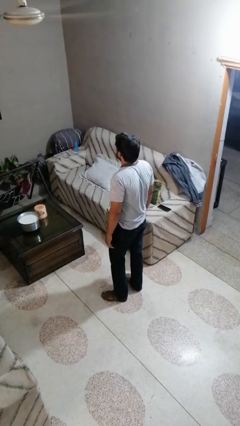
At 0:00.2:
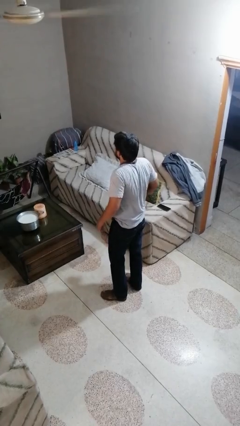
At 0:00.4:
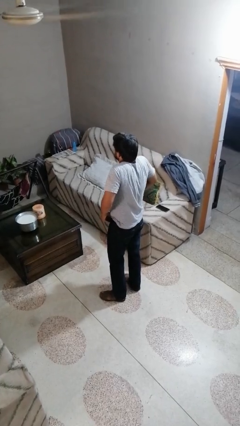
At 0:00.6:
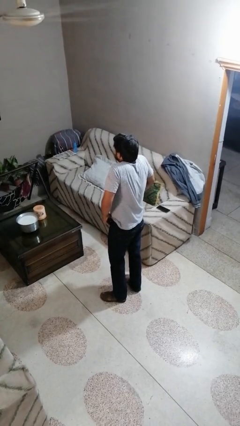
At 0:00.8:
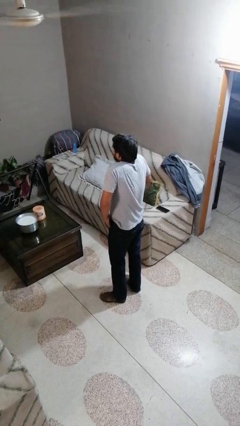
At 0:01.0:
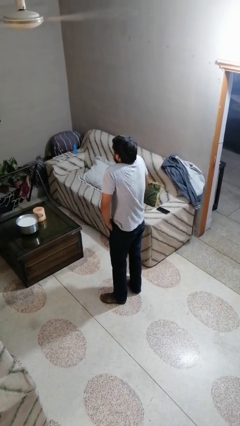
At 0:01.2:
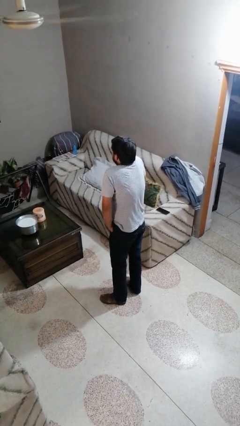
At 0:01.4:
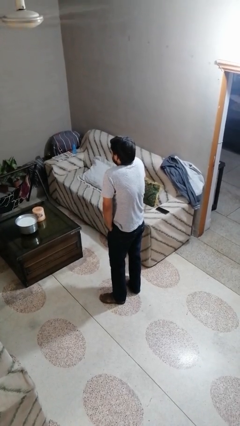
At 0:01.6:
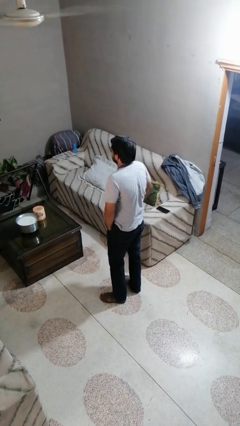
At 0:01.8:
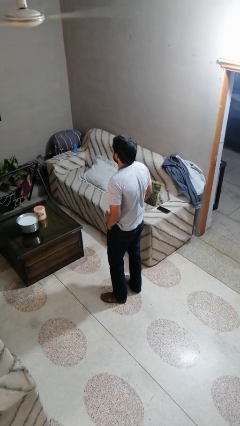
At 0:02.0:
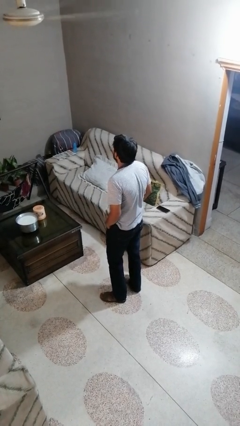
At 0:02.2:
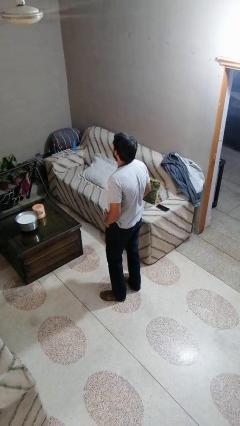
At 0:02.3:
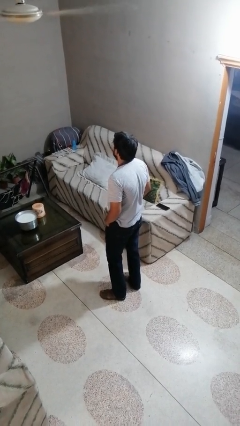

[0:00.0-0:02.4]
person puts hands in back pockets

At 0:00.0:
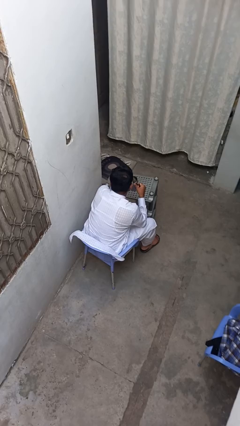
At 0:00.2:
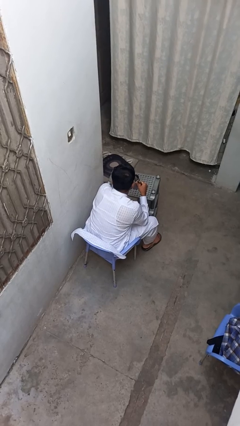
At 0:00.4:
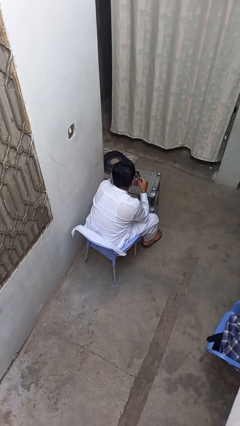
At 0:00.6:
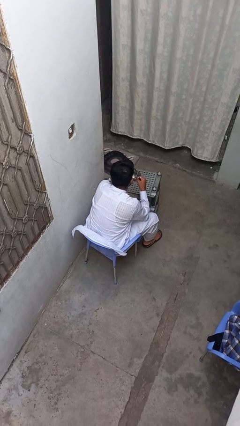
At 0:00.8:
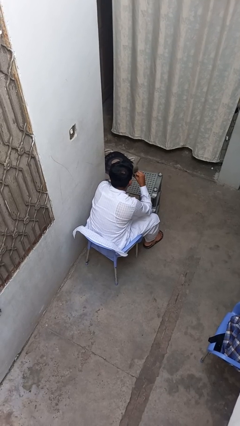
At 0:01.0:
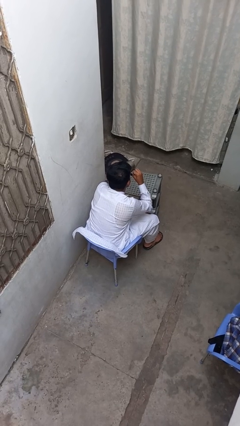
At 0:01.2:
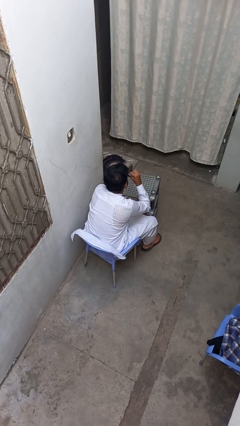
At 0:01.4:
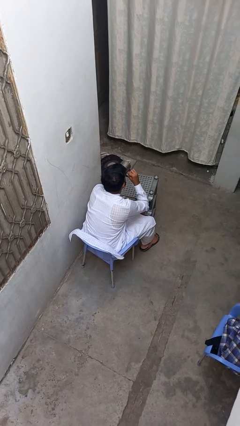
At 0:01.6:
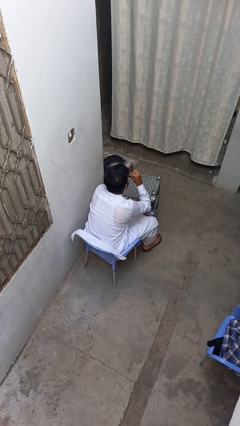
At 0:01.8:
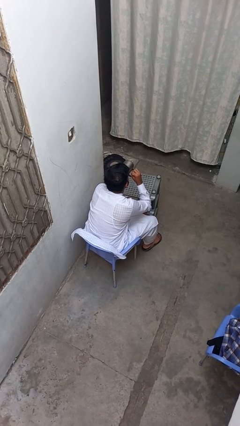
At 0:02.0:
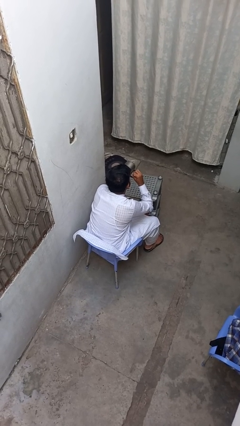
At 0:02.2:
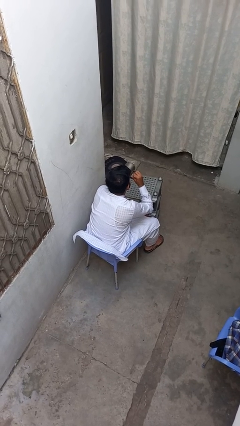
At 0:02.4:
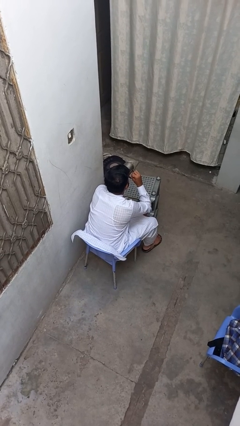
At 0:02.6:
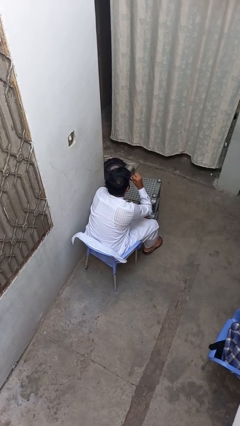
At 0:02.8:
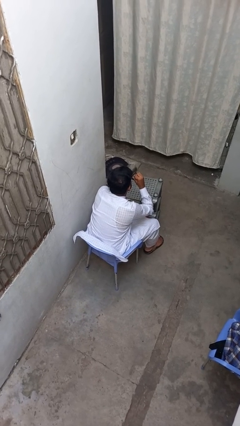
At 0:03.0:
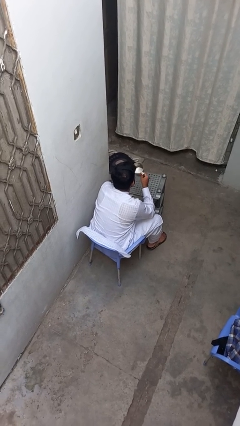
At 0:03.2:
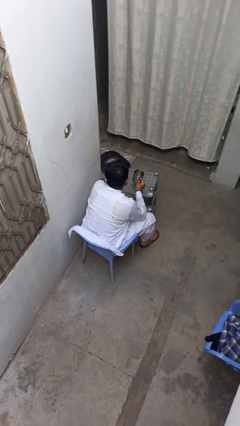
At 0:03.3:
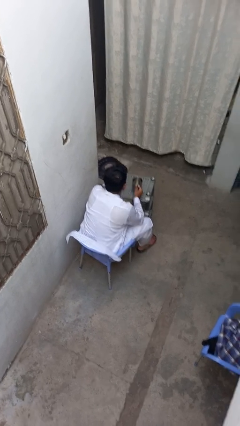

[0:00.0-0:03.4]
person drinks from mug

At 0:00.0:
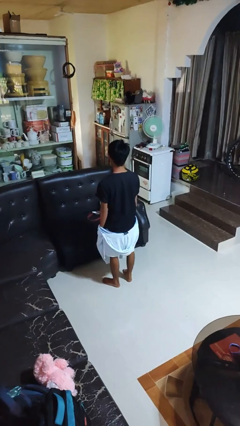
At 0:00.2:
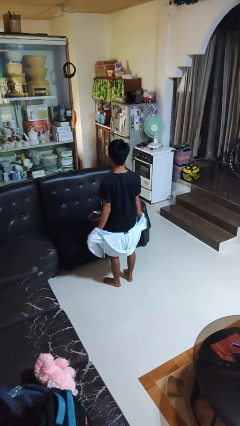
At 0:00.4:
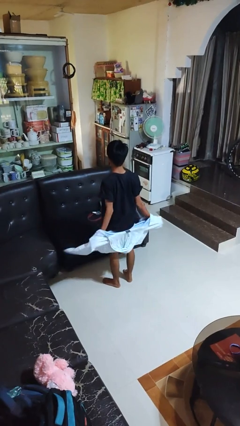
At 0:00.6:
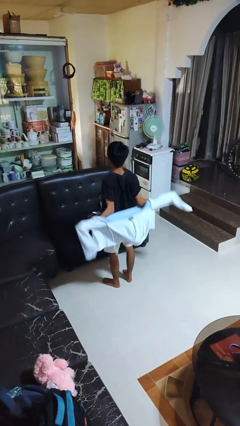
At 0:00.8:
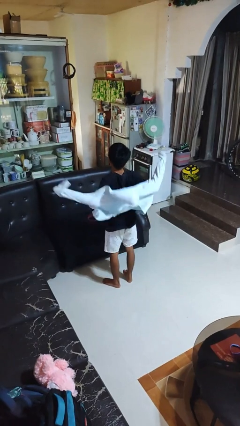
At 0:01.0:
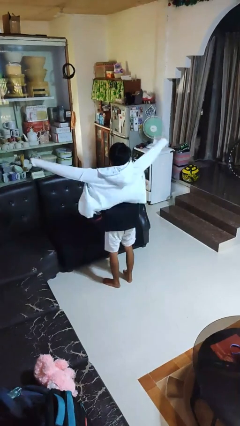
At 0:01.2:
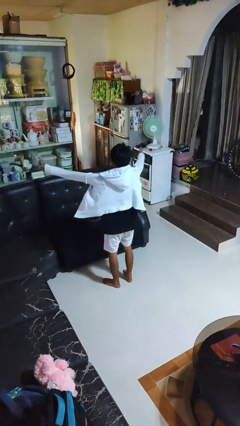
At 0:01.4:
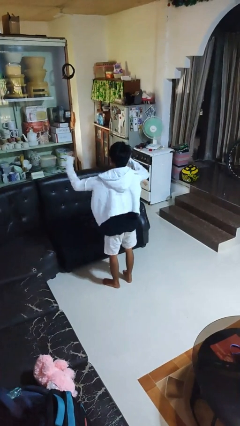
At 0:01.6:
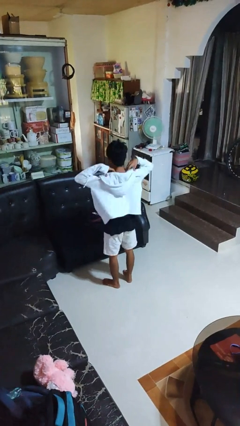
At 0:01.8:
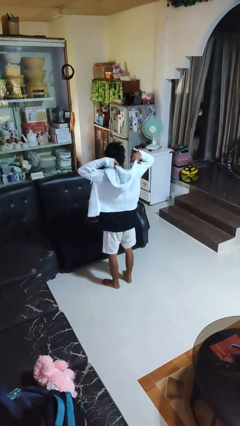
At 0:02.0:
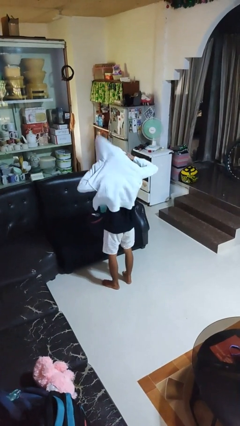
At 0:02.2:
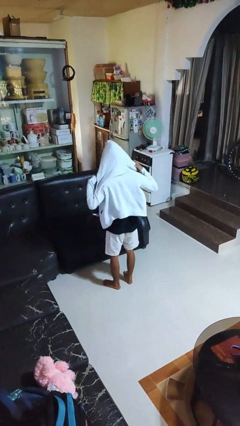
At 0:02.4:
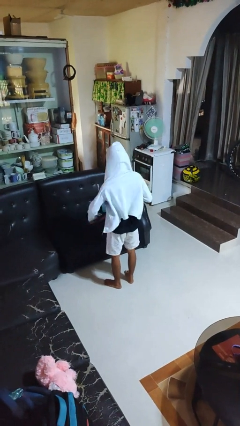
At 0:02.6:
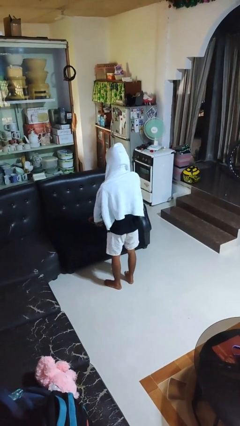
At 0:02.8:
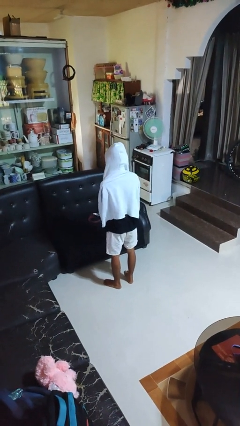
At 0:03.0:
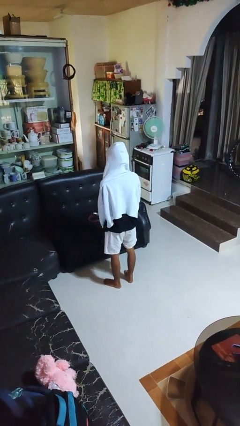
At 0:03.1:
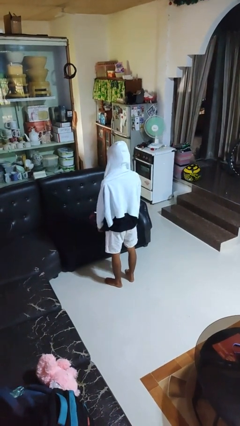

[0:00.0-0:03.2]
person puts on hoodie

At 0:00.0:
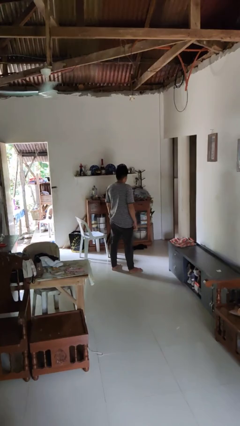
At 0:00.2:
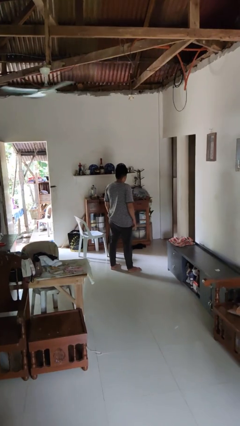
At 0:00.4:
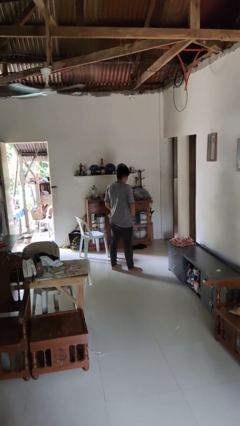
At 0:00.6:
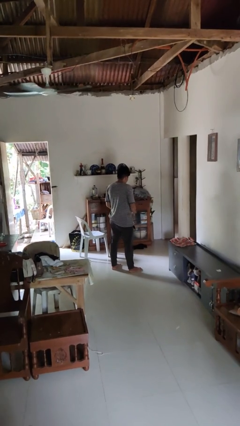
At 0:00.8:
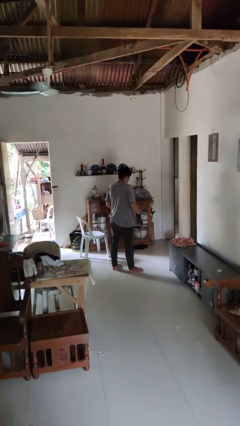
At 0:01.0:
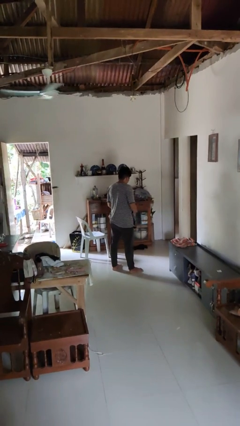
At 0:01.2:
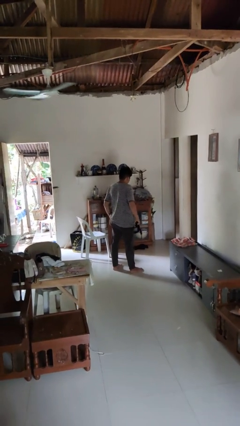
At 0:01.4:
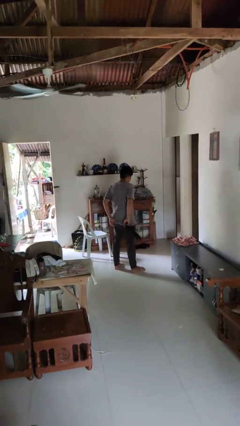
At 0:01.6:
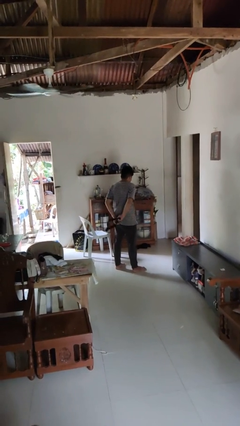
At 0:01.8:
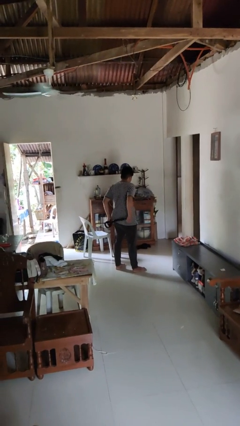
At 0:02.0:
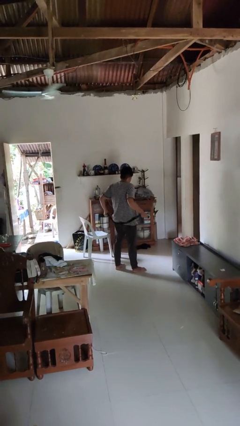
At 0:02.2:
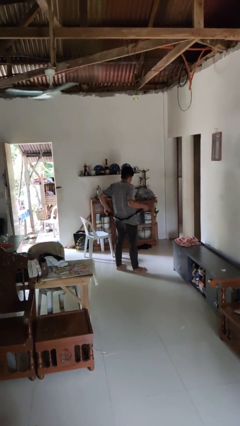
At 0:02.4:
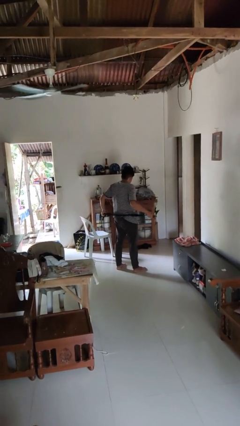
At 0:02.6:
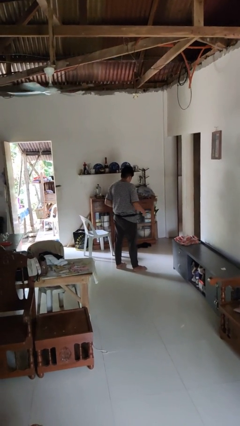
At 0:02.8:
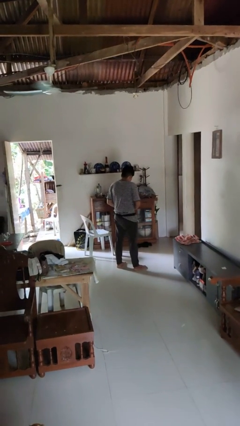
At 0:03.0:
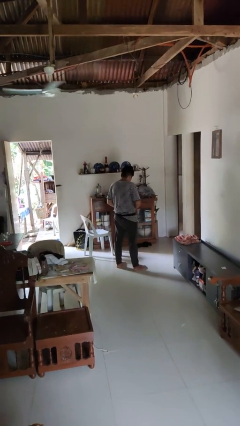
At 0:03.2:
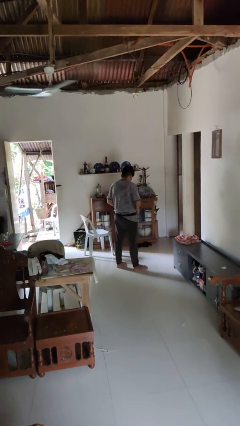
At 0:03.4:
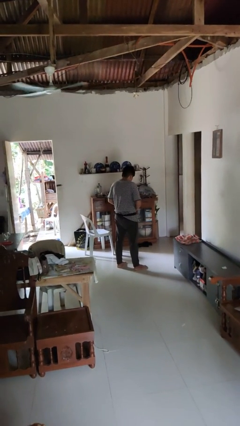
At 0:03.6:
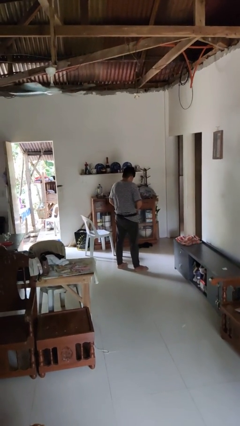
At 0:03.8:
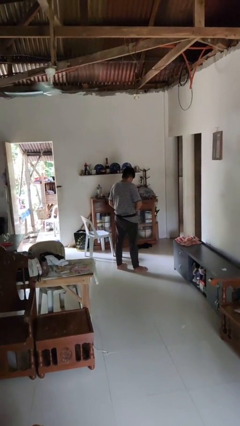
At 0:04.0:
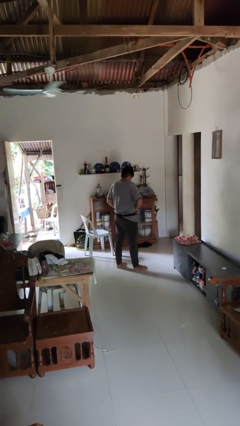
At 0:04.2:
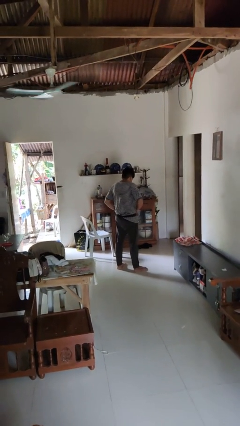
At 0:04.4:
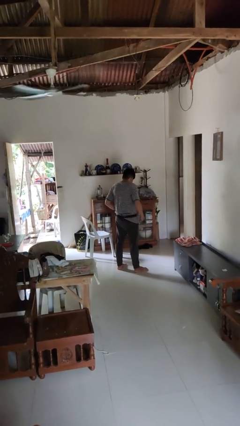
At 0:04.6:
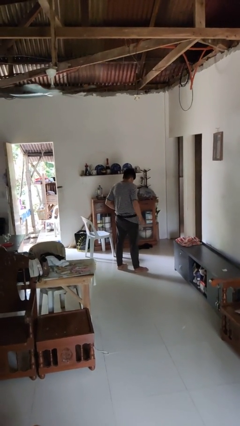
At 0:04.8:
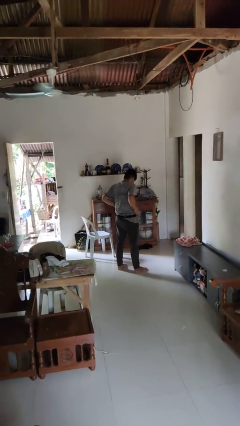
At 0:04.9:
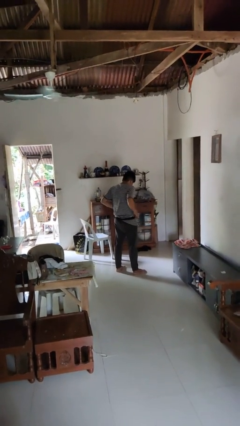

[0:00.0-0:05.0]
person puts on belt

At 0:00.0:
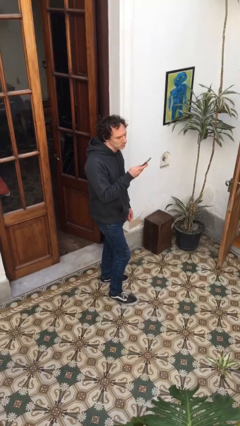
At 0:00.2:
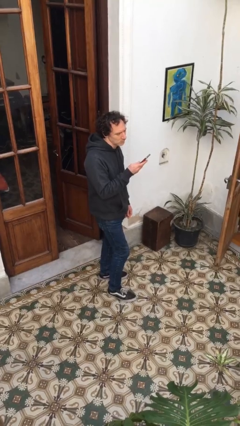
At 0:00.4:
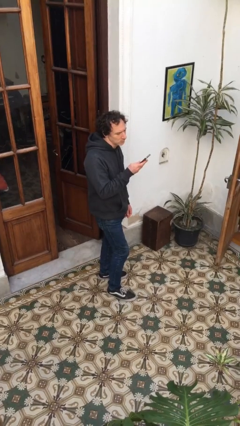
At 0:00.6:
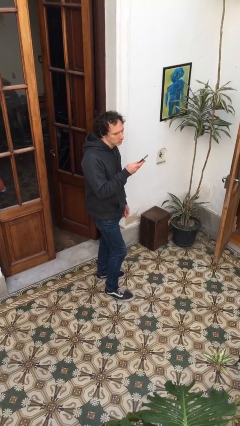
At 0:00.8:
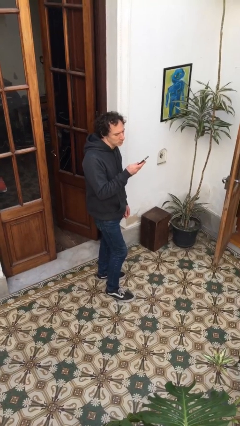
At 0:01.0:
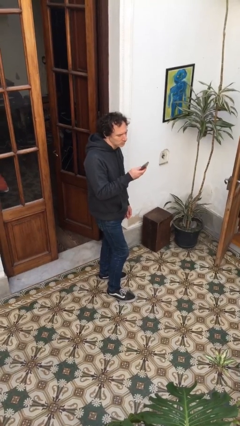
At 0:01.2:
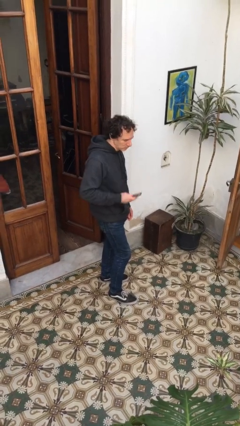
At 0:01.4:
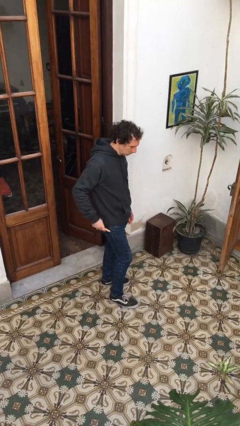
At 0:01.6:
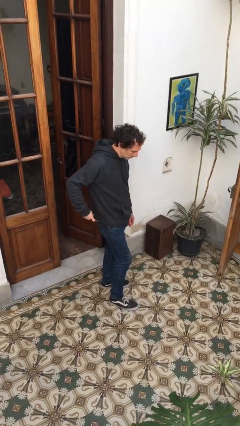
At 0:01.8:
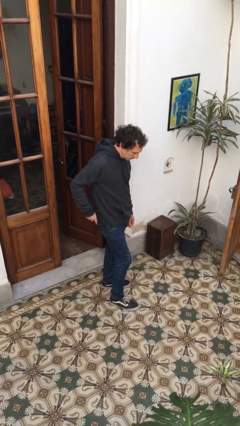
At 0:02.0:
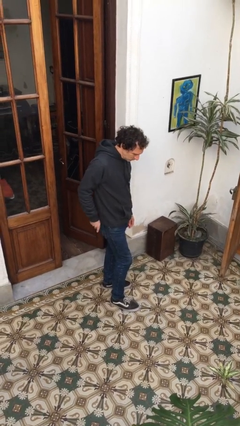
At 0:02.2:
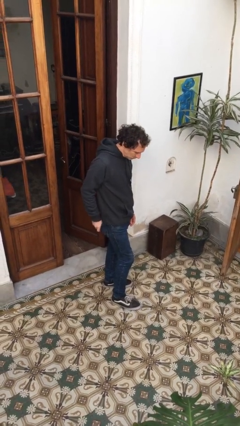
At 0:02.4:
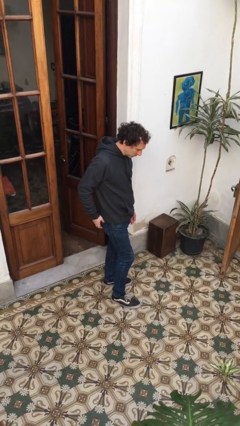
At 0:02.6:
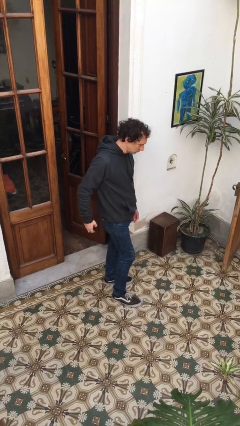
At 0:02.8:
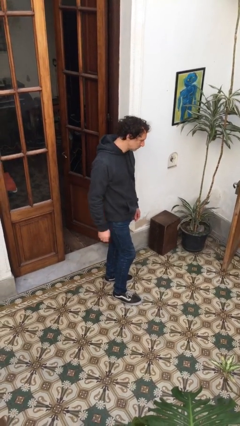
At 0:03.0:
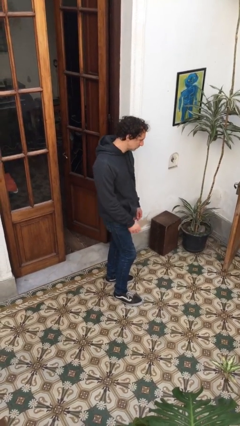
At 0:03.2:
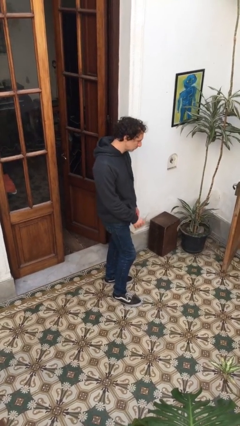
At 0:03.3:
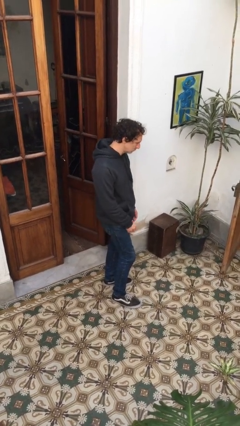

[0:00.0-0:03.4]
person puts phone into pocket

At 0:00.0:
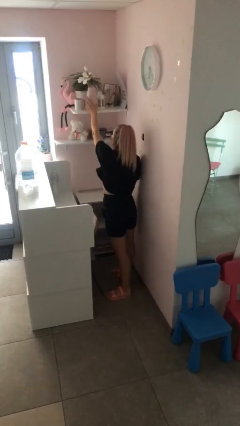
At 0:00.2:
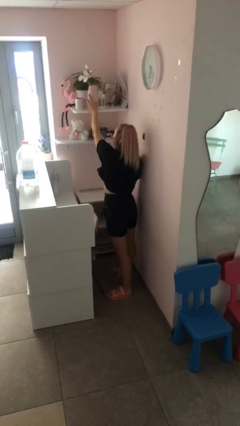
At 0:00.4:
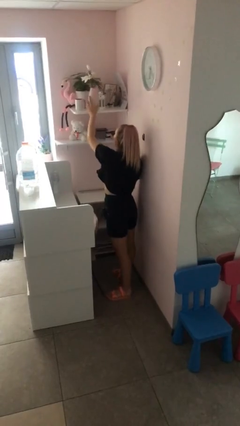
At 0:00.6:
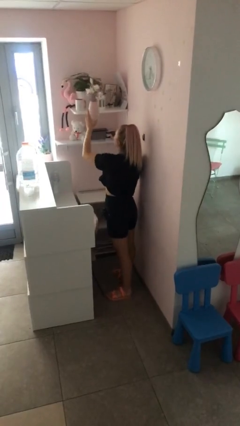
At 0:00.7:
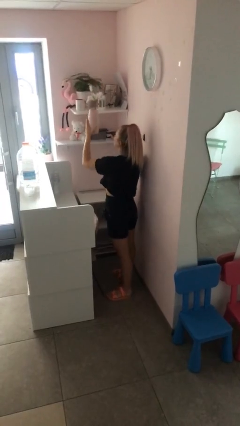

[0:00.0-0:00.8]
person picks up object from cabinet
